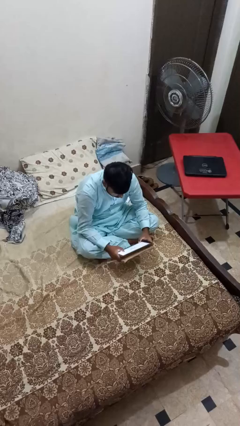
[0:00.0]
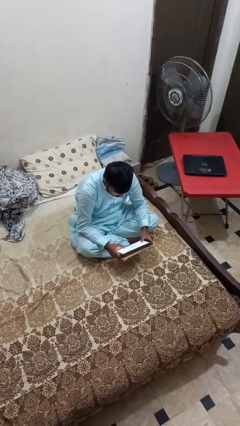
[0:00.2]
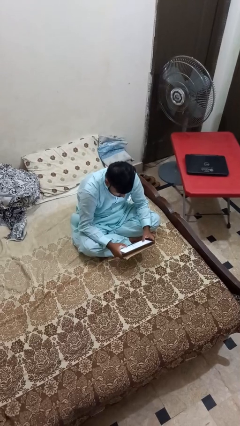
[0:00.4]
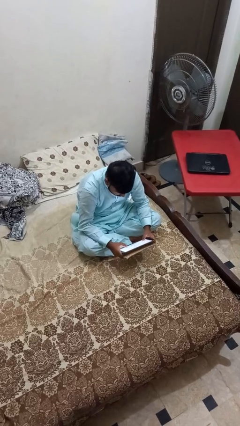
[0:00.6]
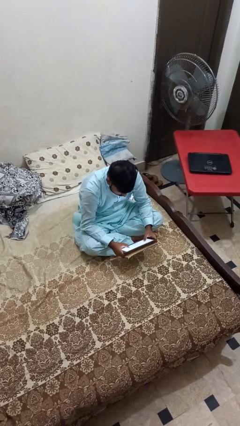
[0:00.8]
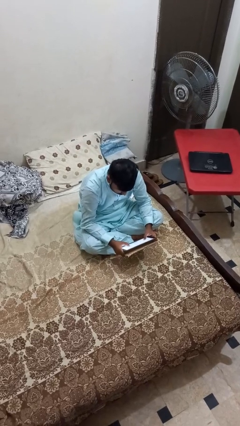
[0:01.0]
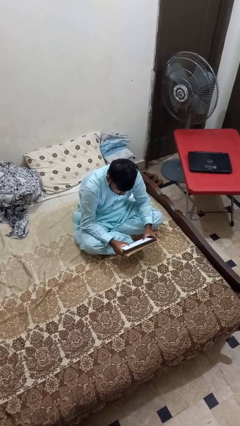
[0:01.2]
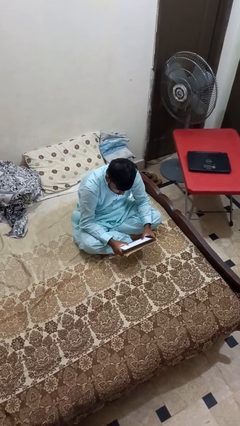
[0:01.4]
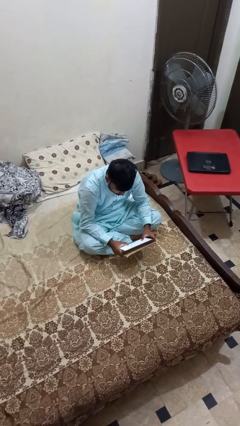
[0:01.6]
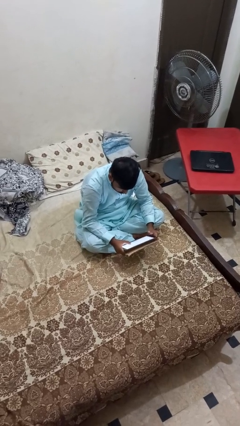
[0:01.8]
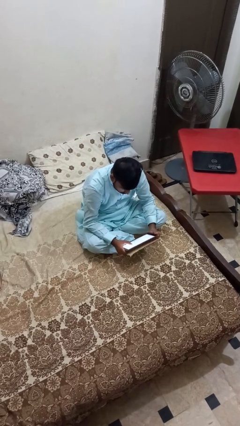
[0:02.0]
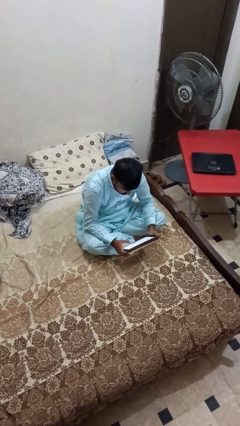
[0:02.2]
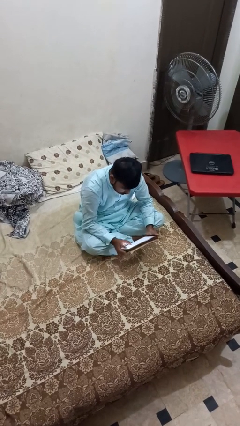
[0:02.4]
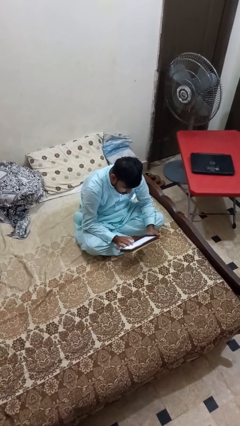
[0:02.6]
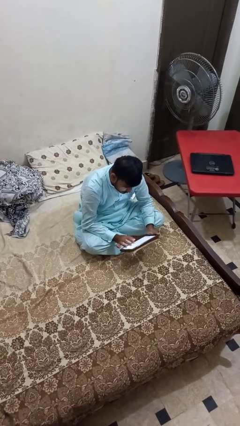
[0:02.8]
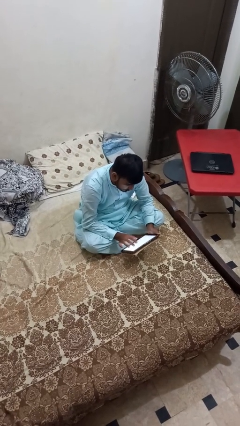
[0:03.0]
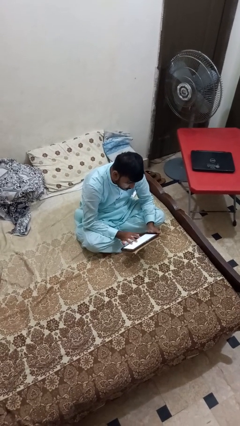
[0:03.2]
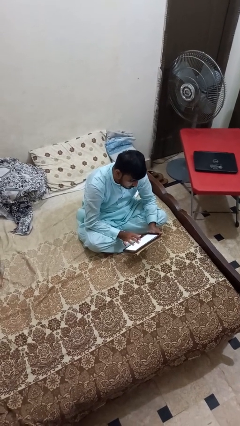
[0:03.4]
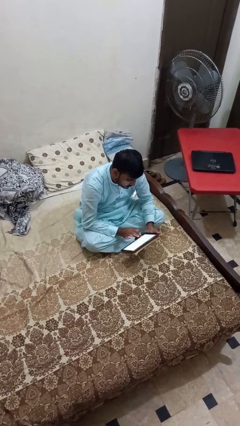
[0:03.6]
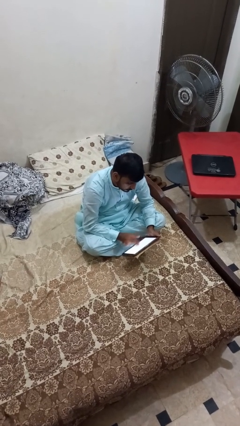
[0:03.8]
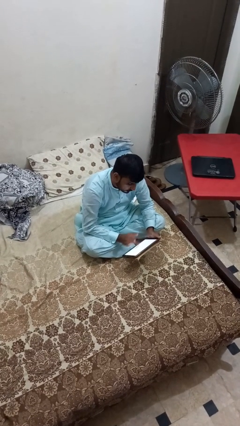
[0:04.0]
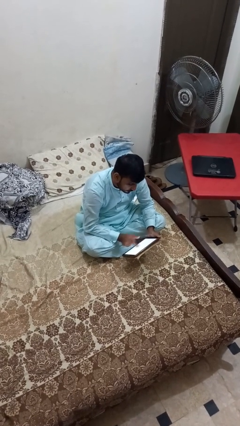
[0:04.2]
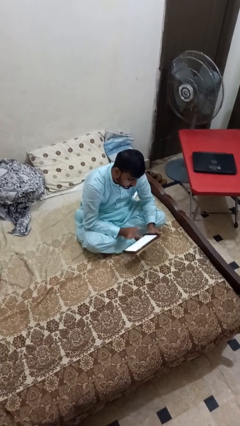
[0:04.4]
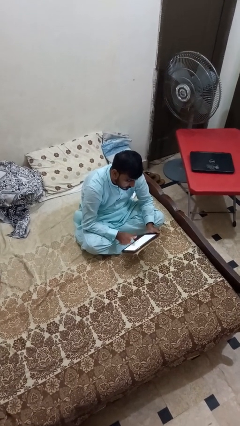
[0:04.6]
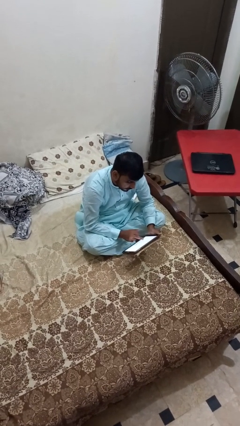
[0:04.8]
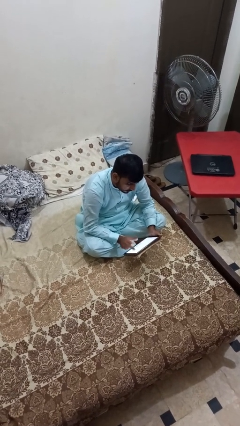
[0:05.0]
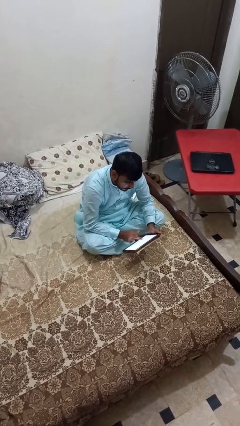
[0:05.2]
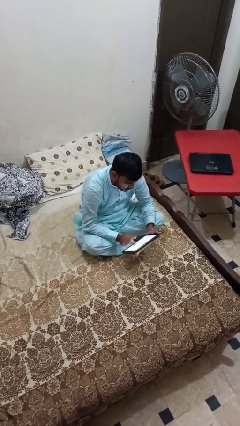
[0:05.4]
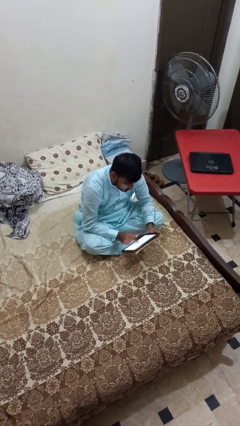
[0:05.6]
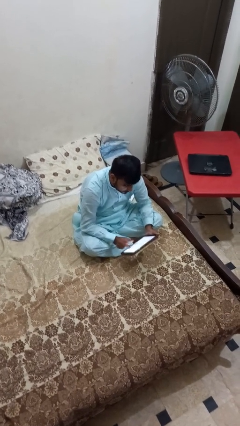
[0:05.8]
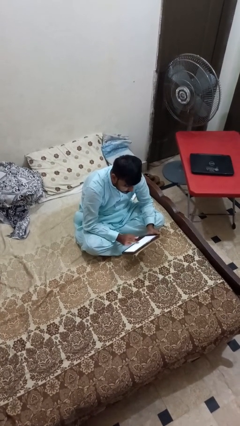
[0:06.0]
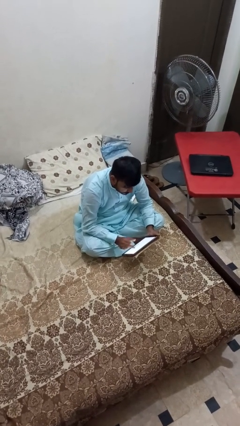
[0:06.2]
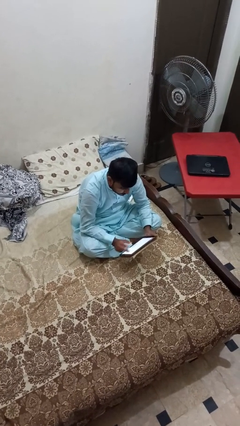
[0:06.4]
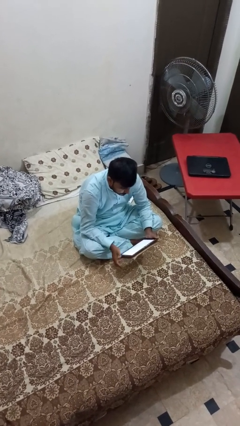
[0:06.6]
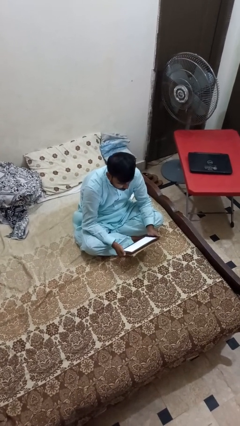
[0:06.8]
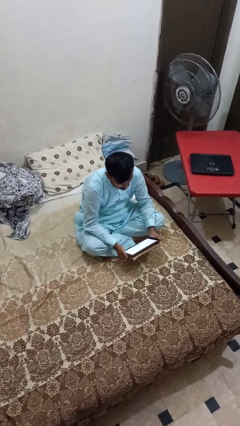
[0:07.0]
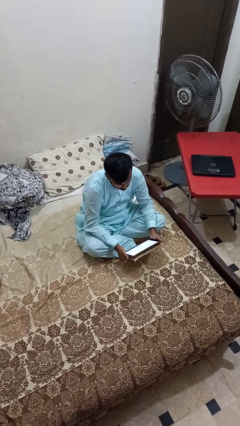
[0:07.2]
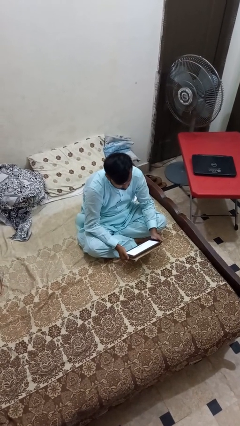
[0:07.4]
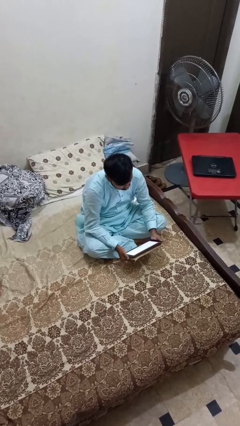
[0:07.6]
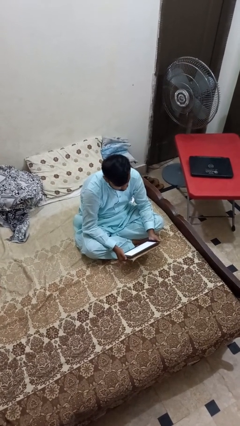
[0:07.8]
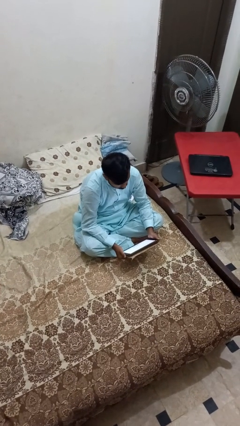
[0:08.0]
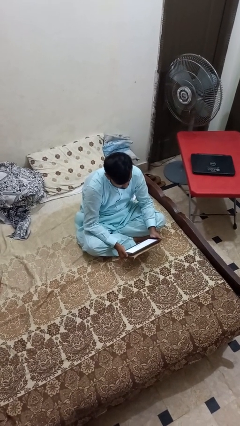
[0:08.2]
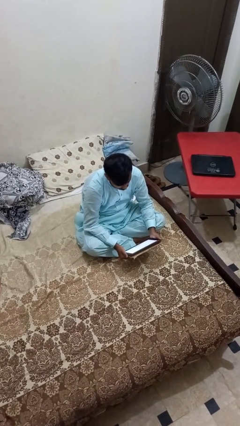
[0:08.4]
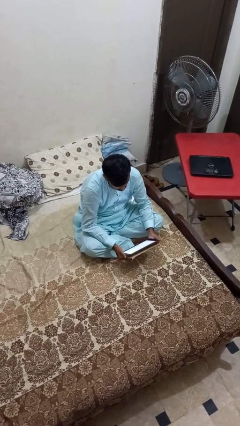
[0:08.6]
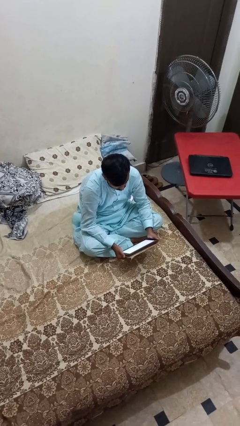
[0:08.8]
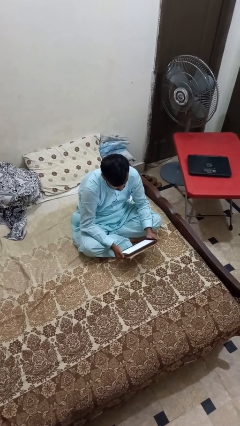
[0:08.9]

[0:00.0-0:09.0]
person interacts with tablet

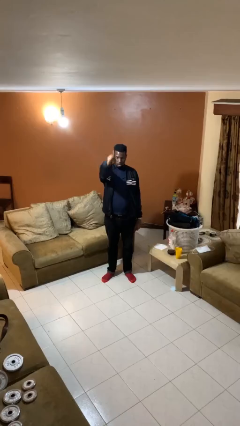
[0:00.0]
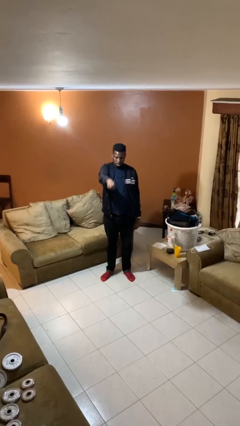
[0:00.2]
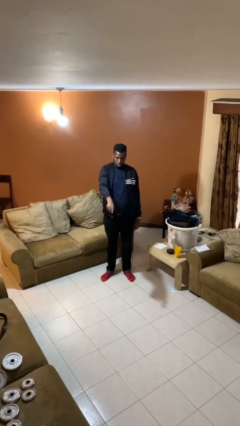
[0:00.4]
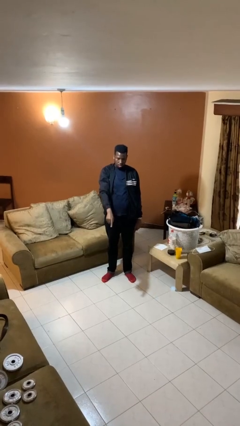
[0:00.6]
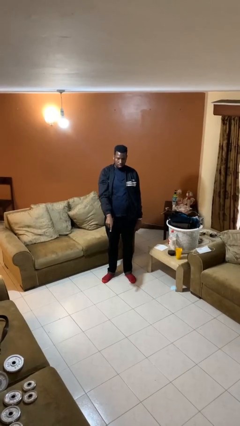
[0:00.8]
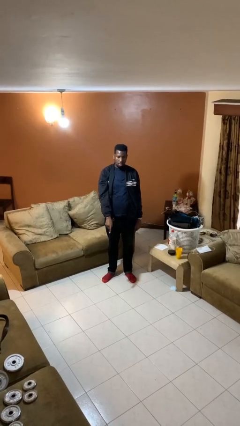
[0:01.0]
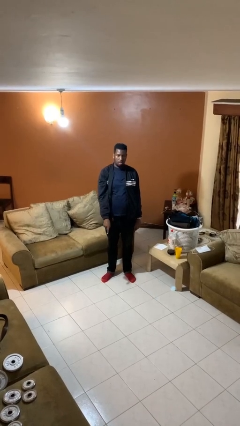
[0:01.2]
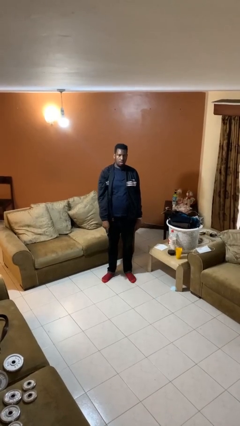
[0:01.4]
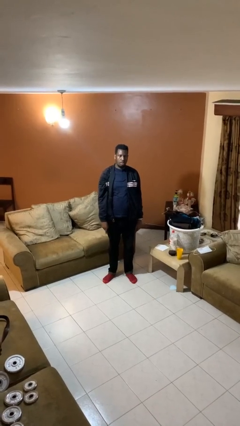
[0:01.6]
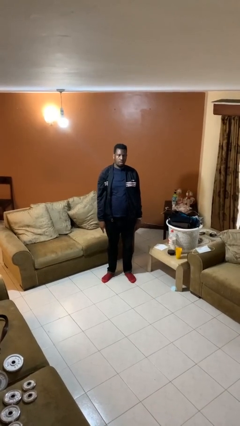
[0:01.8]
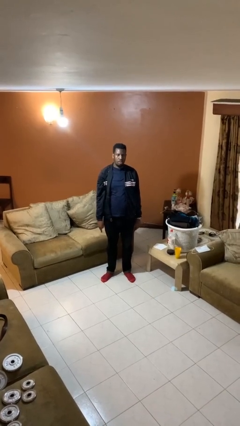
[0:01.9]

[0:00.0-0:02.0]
person gestures swipe down

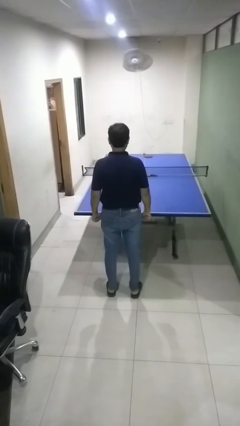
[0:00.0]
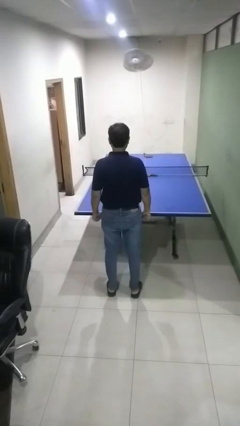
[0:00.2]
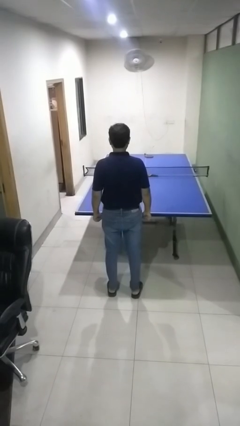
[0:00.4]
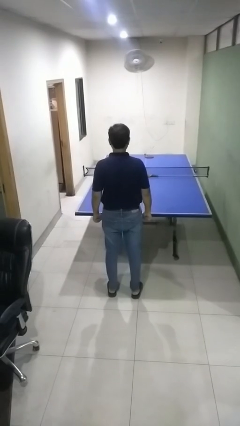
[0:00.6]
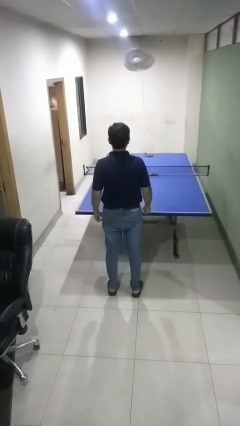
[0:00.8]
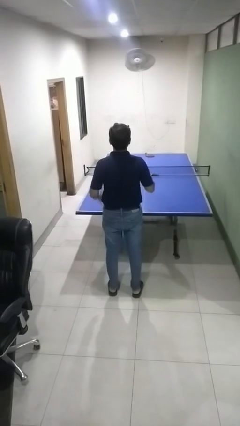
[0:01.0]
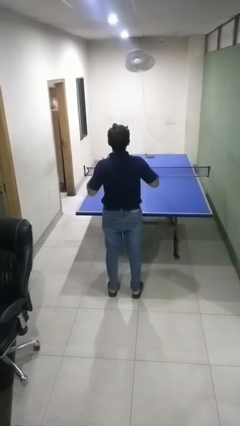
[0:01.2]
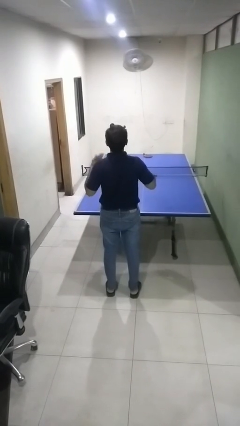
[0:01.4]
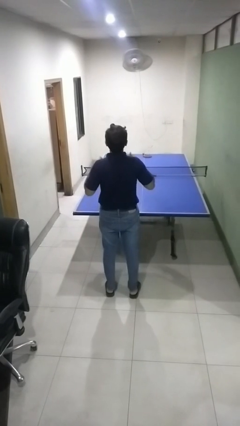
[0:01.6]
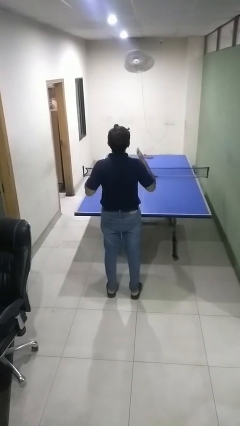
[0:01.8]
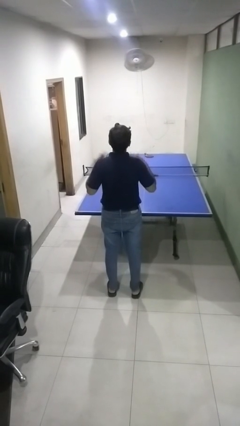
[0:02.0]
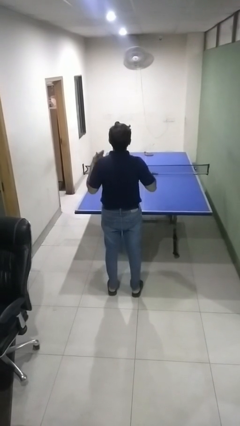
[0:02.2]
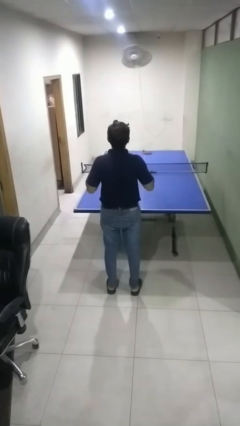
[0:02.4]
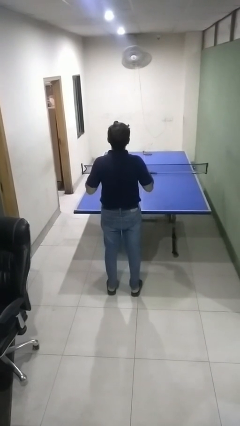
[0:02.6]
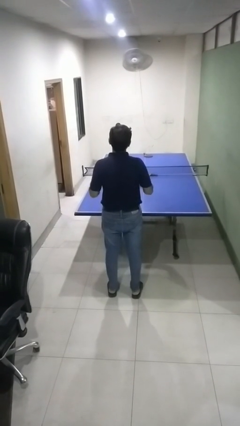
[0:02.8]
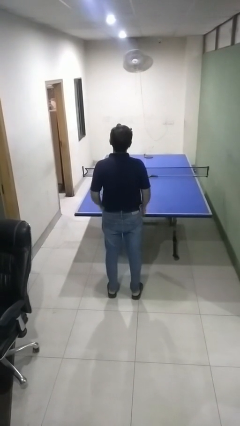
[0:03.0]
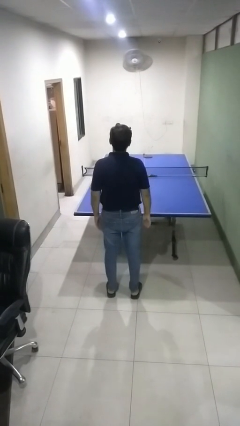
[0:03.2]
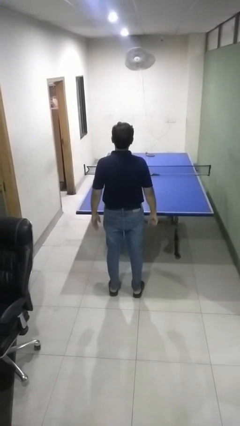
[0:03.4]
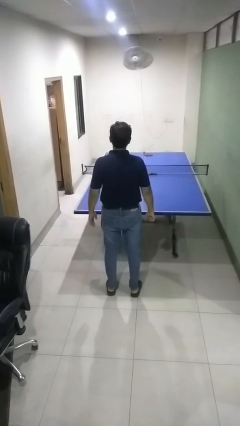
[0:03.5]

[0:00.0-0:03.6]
person drums on chest

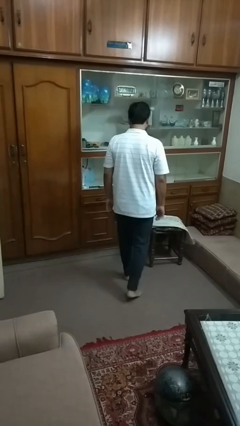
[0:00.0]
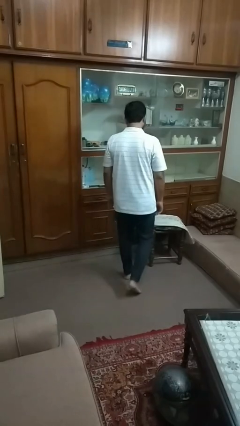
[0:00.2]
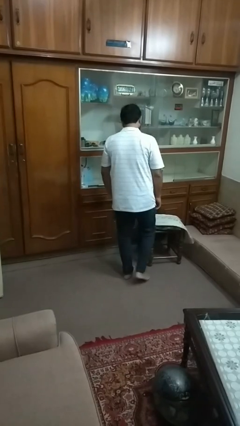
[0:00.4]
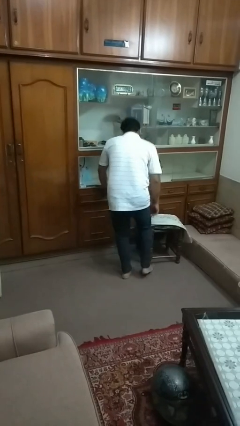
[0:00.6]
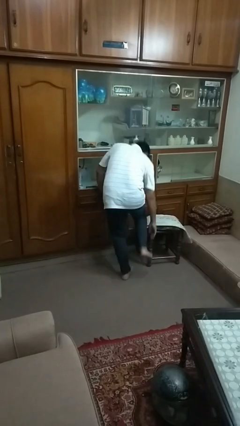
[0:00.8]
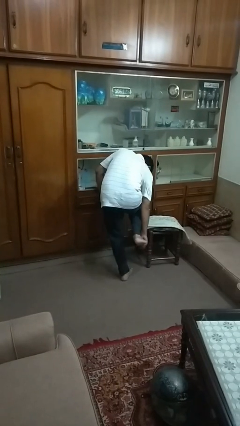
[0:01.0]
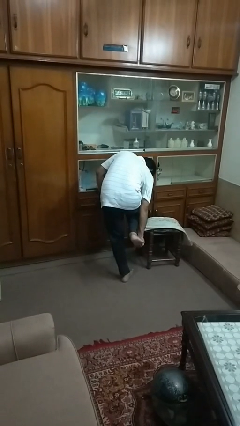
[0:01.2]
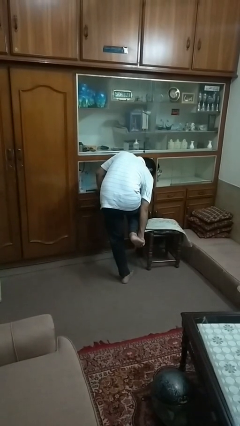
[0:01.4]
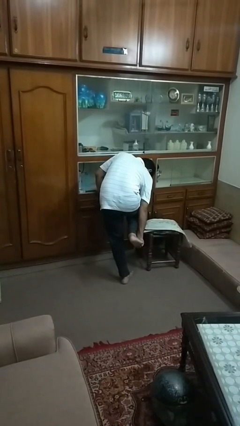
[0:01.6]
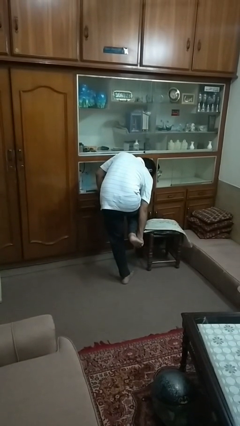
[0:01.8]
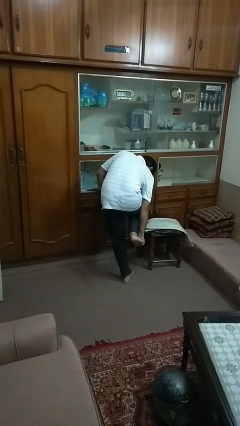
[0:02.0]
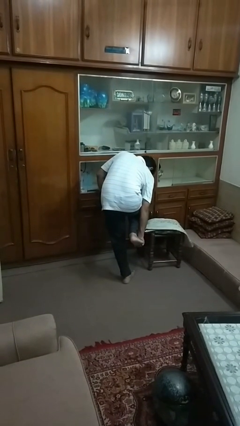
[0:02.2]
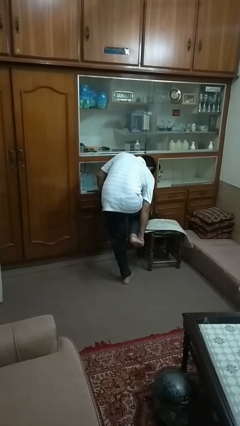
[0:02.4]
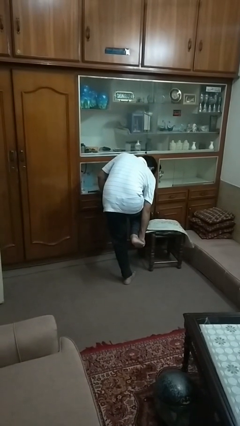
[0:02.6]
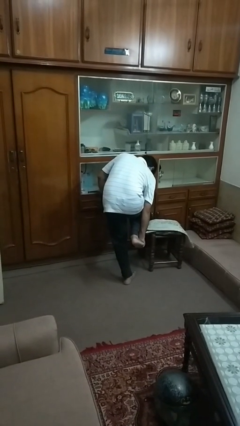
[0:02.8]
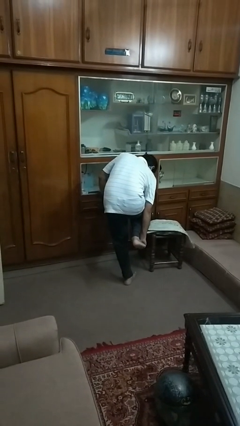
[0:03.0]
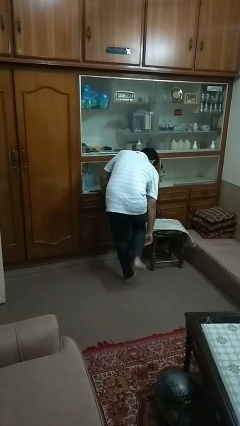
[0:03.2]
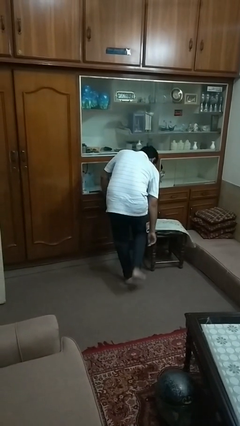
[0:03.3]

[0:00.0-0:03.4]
person stubs toe
